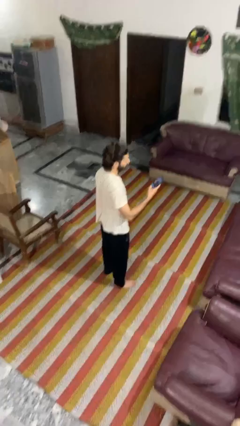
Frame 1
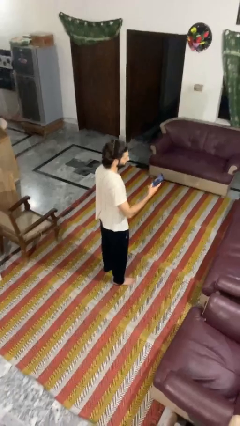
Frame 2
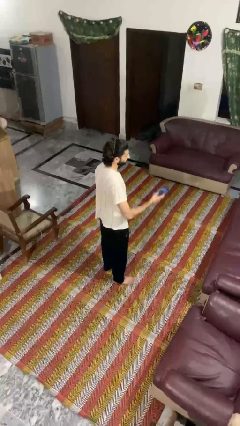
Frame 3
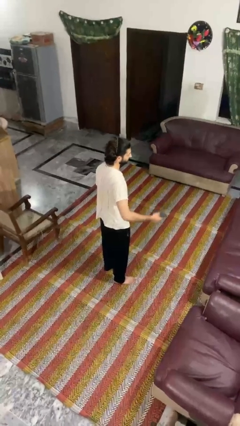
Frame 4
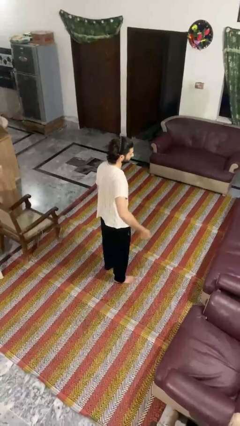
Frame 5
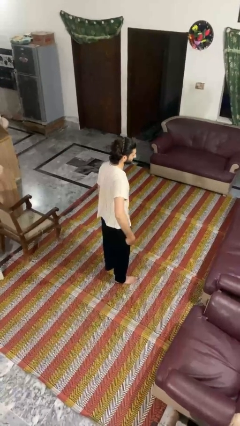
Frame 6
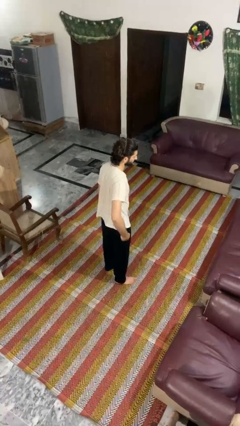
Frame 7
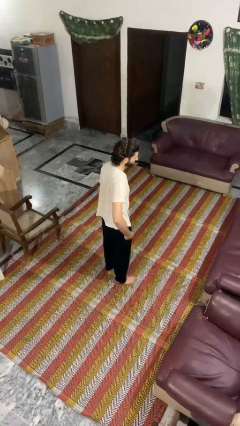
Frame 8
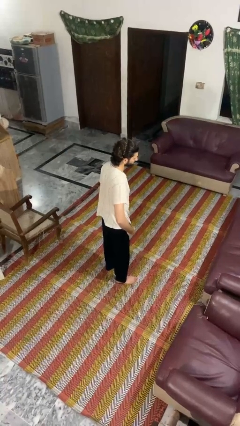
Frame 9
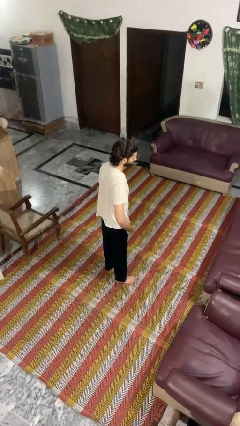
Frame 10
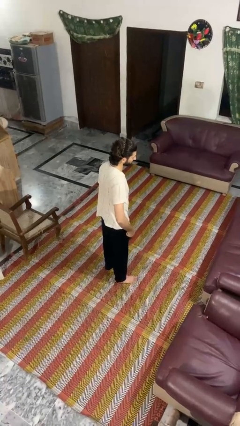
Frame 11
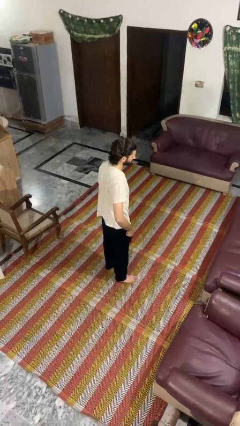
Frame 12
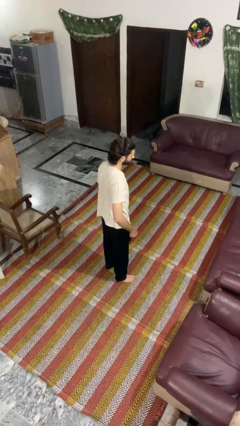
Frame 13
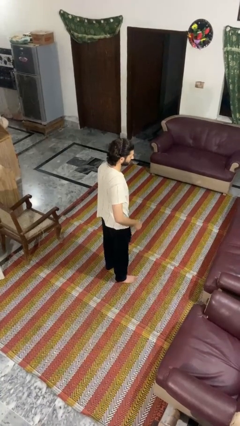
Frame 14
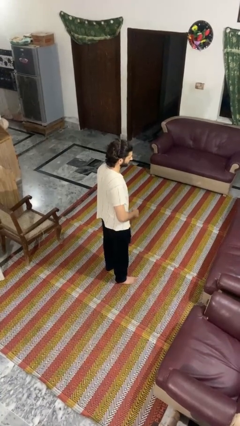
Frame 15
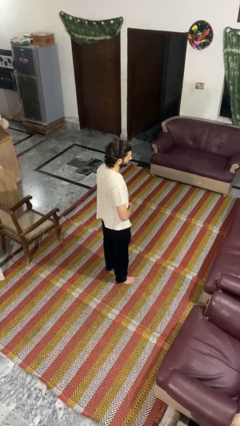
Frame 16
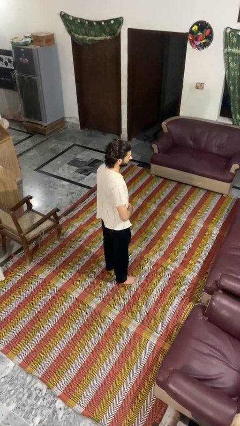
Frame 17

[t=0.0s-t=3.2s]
person puts phone into pocket

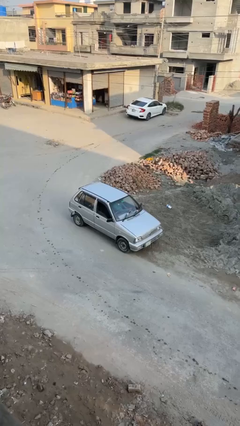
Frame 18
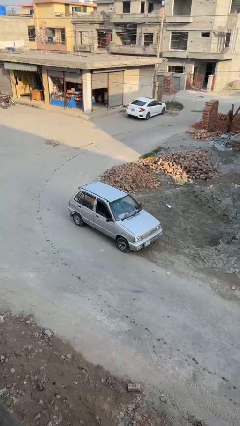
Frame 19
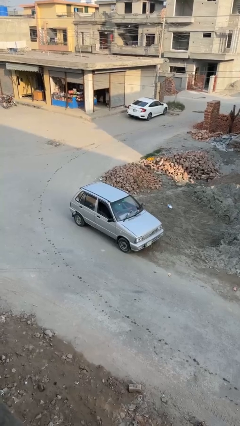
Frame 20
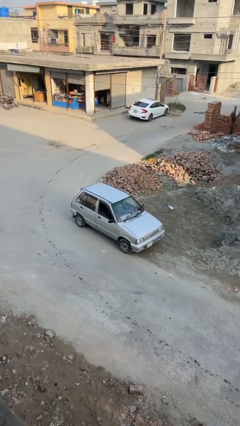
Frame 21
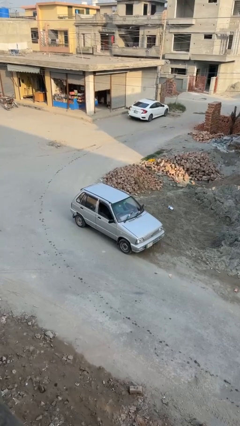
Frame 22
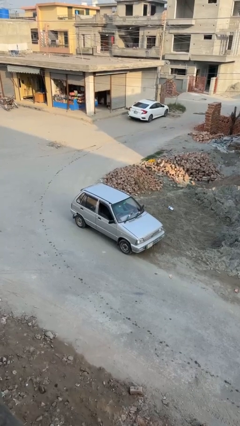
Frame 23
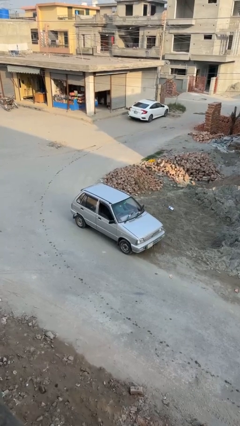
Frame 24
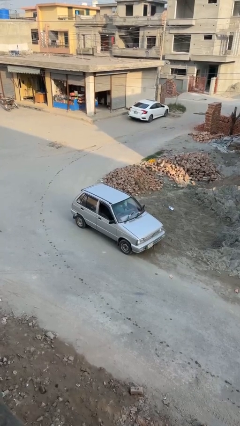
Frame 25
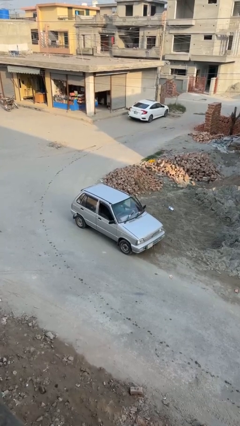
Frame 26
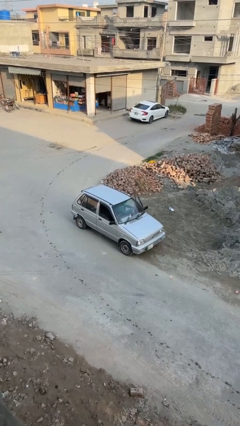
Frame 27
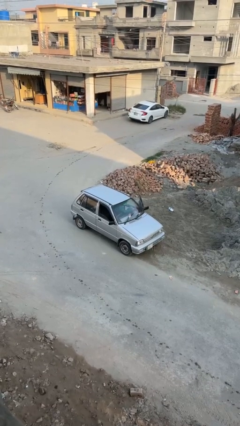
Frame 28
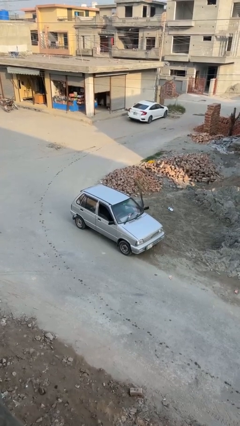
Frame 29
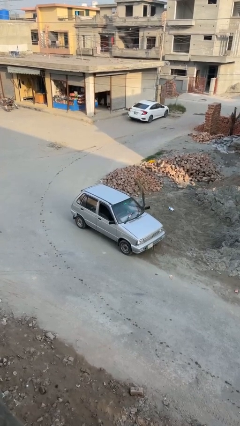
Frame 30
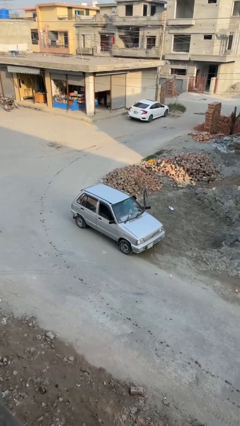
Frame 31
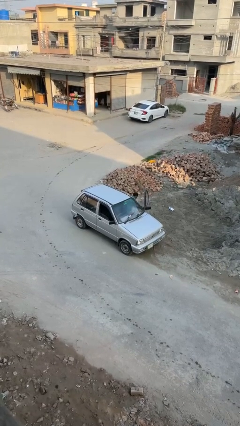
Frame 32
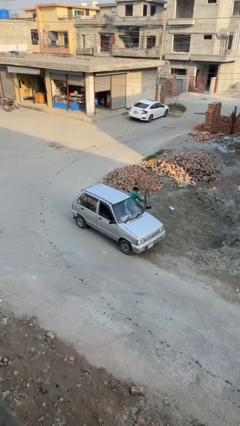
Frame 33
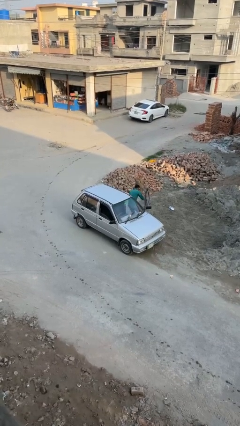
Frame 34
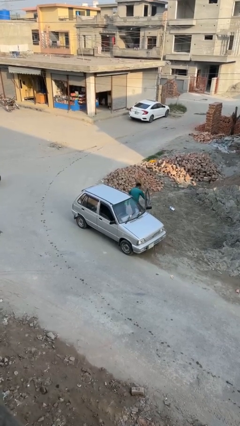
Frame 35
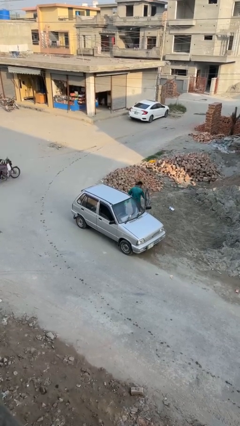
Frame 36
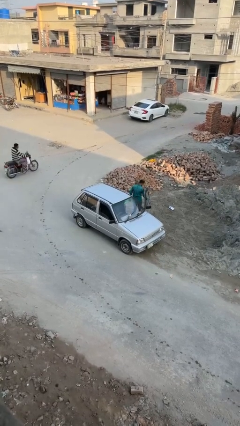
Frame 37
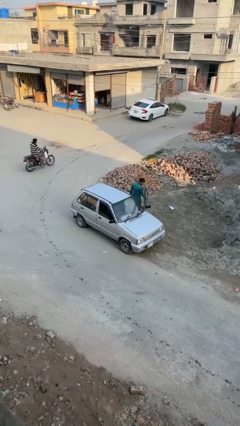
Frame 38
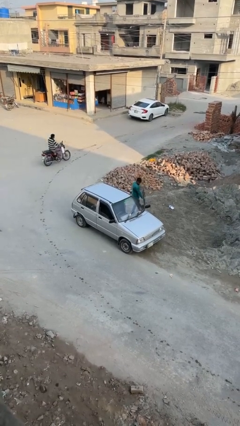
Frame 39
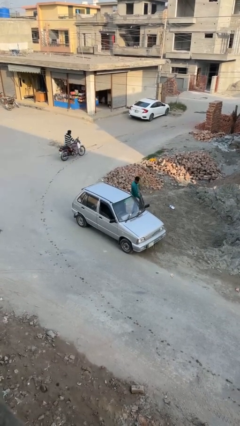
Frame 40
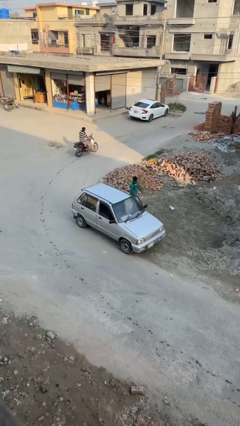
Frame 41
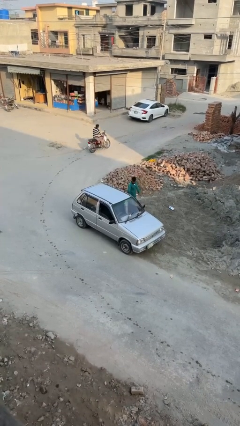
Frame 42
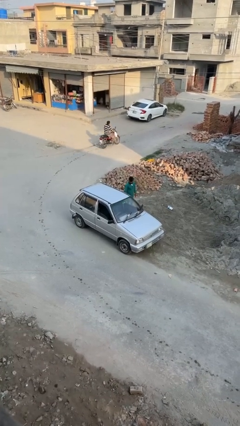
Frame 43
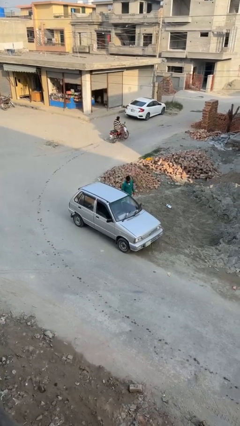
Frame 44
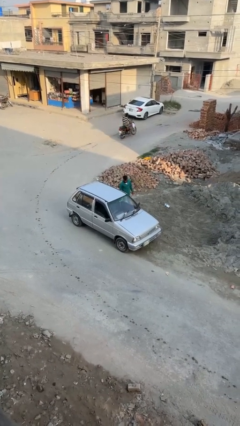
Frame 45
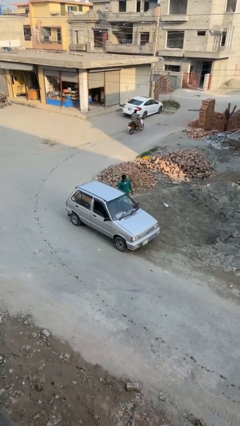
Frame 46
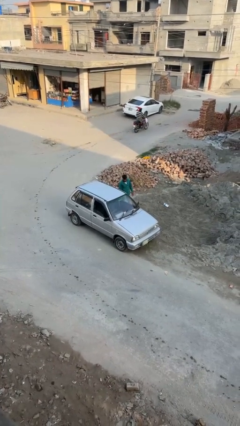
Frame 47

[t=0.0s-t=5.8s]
car drops off person

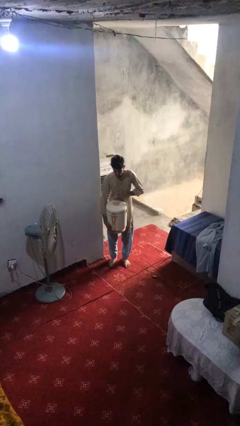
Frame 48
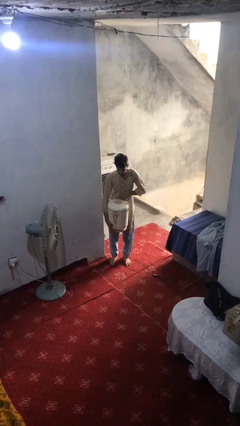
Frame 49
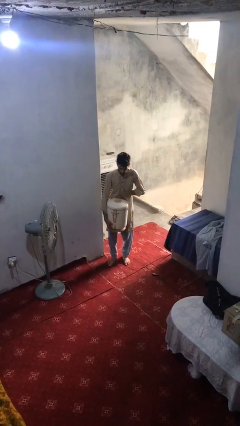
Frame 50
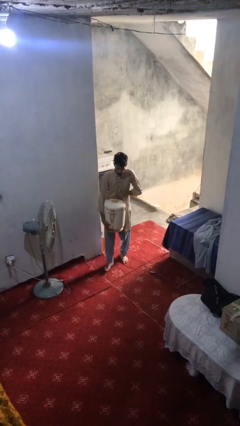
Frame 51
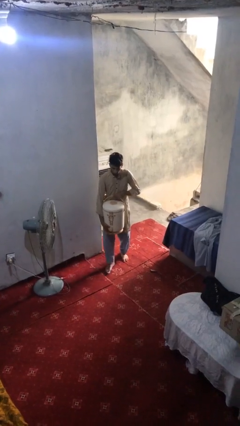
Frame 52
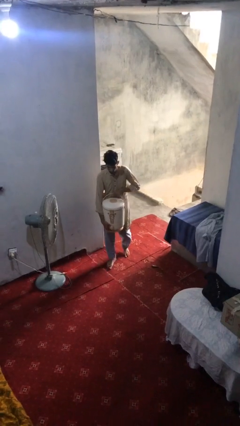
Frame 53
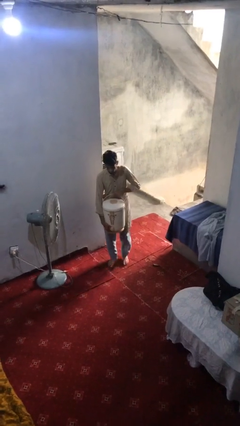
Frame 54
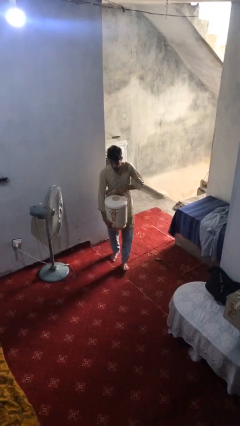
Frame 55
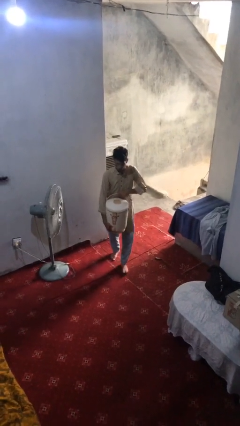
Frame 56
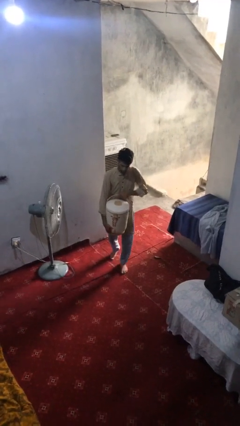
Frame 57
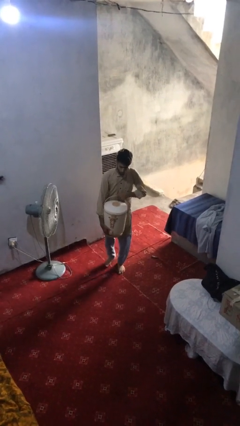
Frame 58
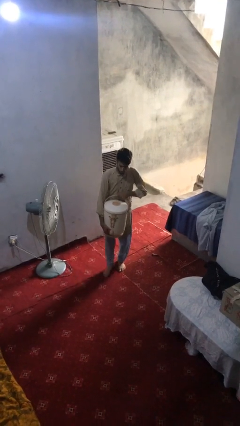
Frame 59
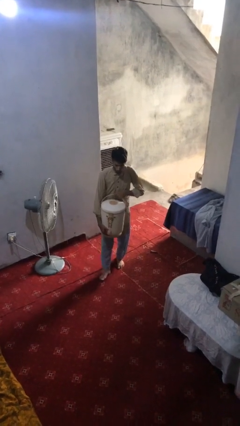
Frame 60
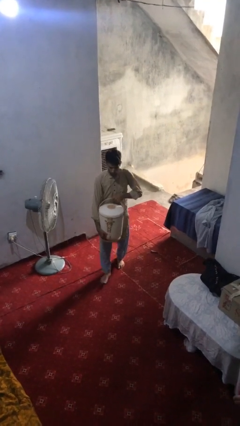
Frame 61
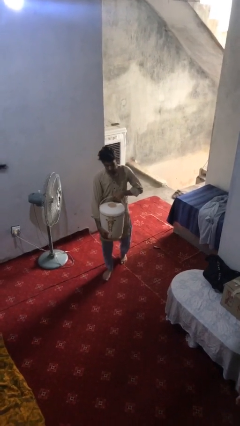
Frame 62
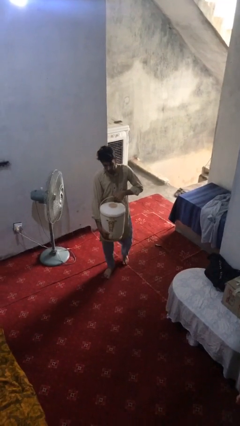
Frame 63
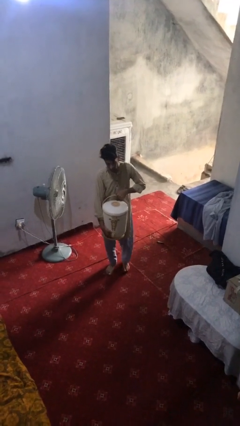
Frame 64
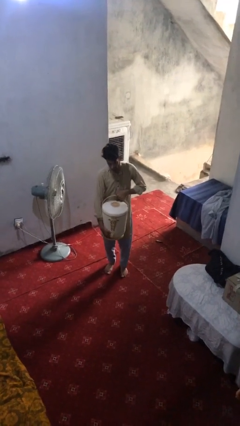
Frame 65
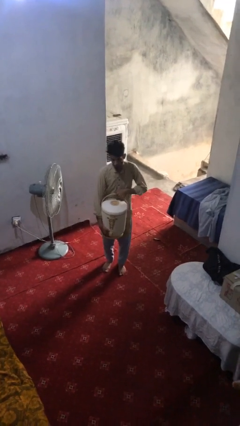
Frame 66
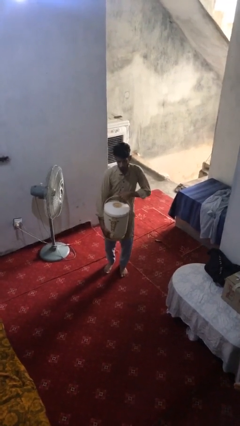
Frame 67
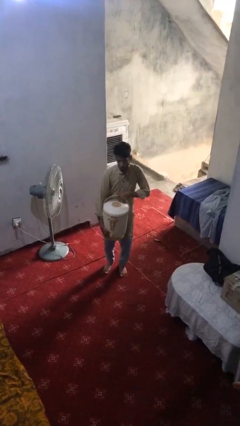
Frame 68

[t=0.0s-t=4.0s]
person carries heavy object

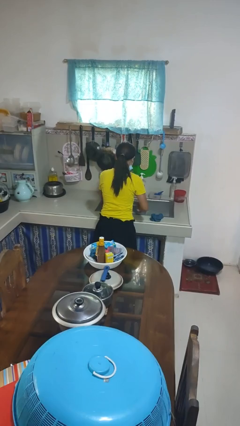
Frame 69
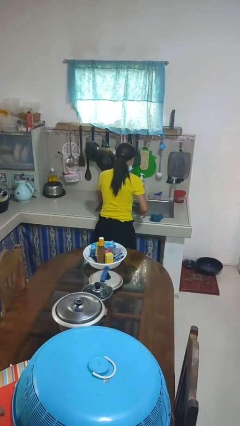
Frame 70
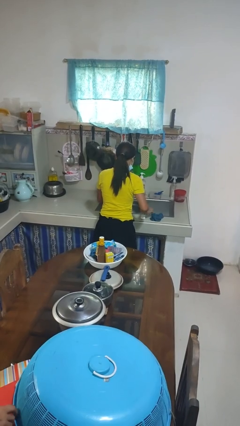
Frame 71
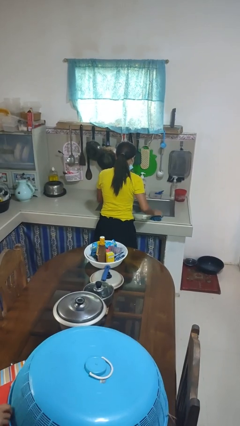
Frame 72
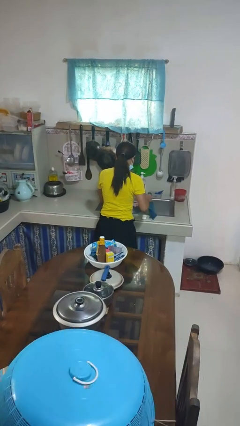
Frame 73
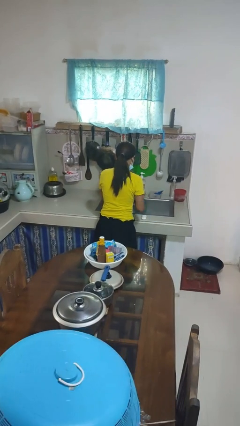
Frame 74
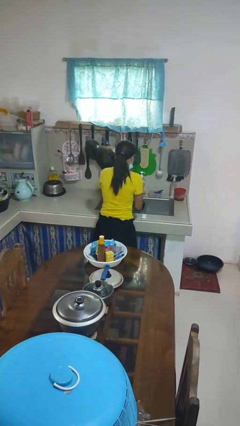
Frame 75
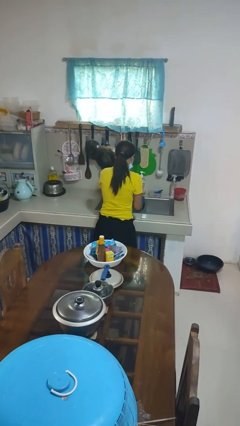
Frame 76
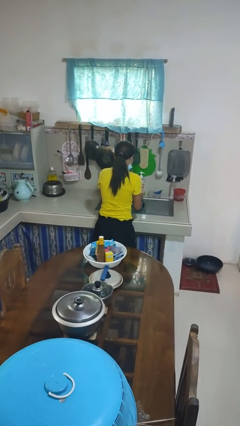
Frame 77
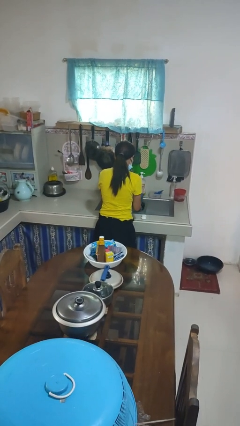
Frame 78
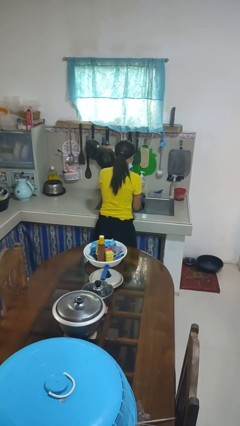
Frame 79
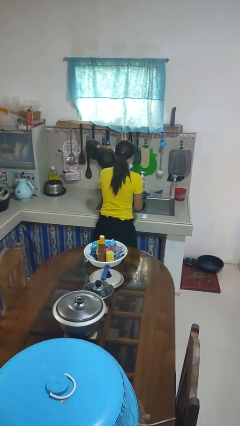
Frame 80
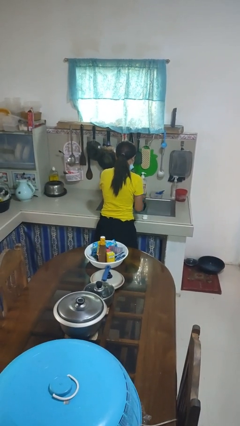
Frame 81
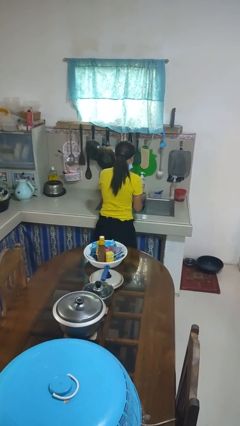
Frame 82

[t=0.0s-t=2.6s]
person dries hands with towel

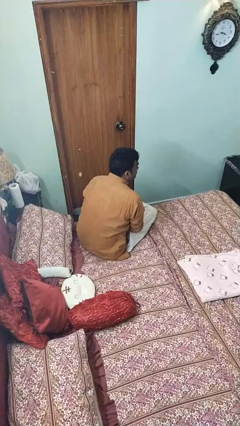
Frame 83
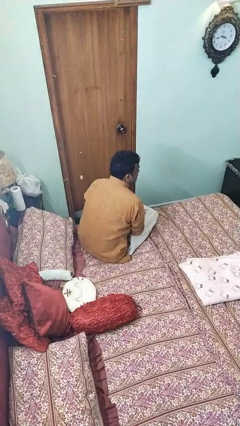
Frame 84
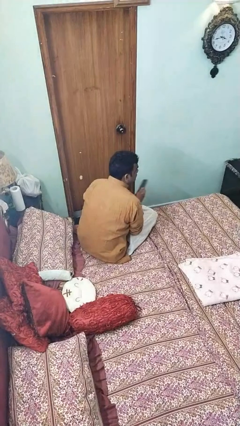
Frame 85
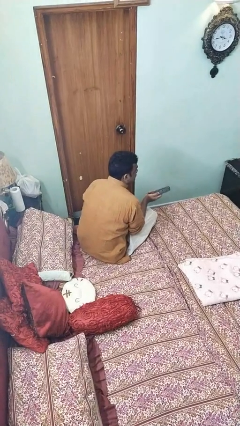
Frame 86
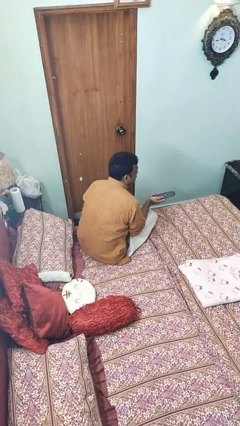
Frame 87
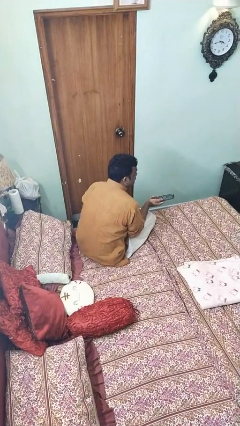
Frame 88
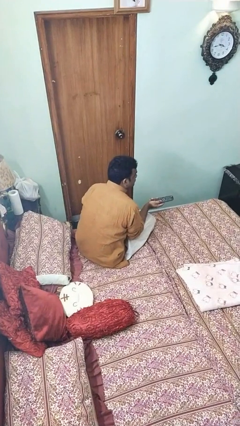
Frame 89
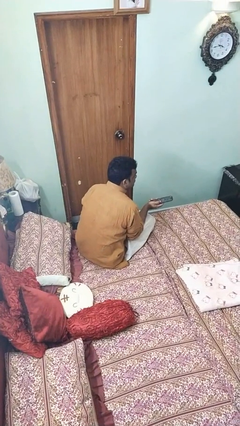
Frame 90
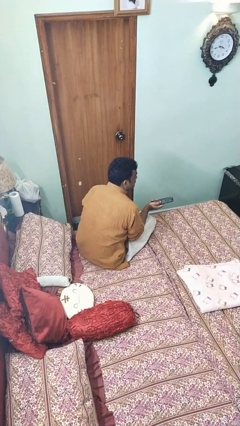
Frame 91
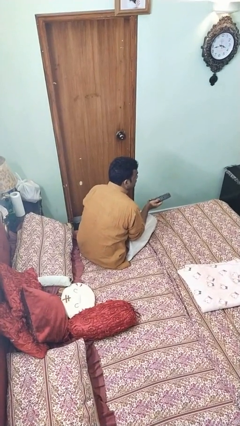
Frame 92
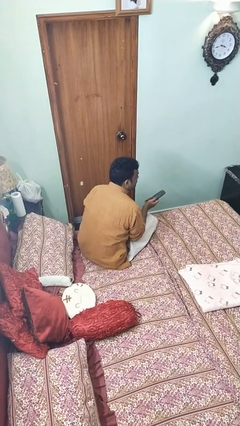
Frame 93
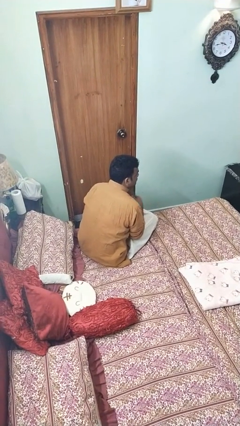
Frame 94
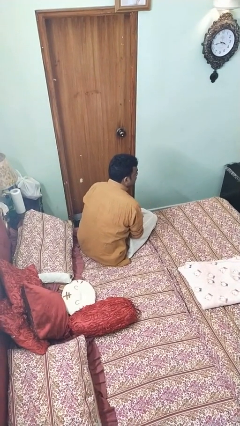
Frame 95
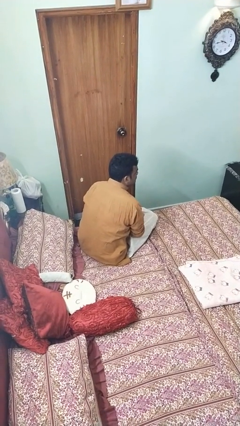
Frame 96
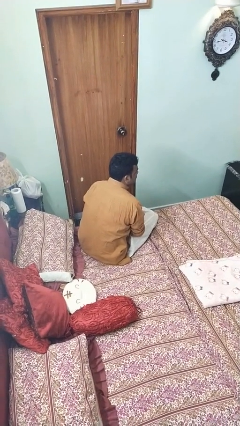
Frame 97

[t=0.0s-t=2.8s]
person uses television remote
